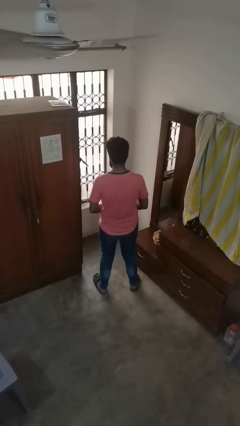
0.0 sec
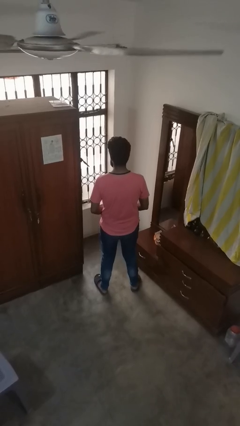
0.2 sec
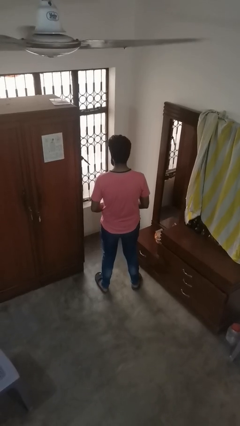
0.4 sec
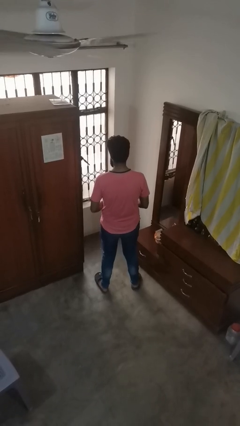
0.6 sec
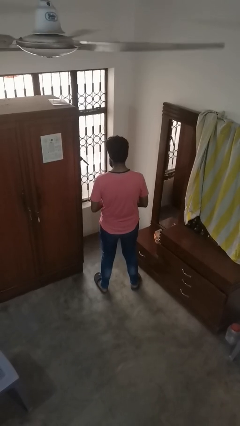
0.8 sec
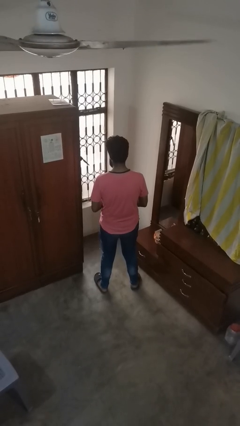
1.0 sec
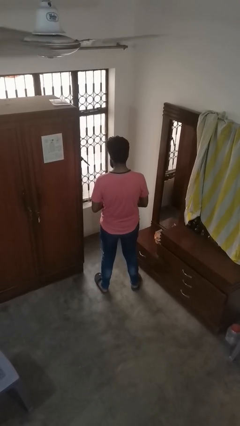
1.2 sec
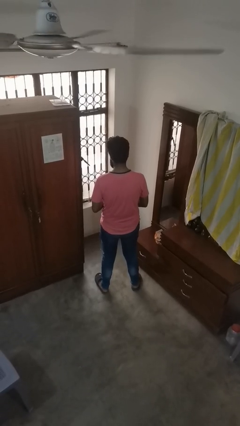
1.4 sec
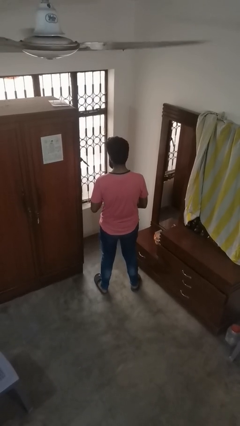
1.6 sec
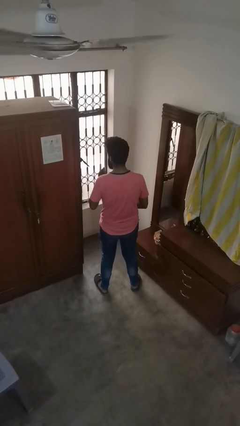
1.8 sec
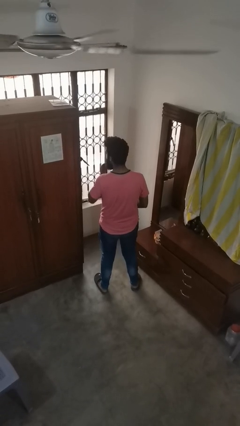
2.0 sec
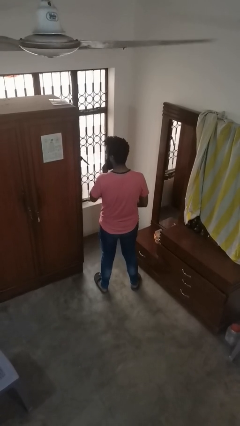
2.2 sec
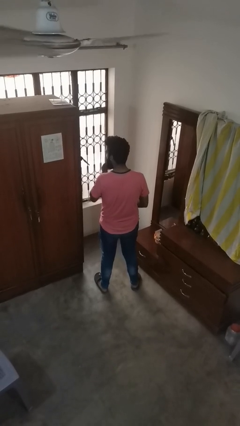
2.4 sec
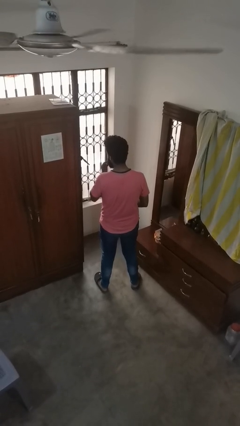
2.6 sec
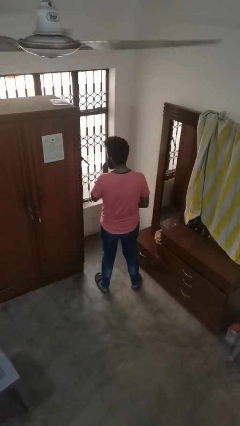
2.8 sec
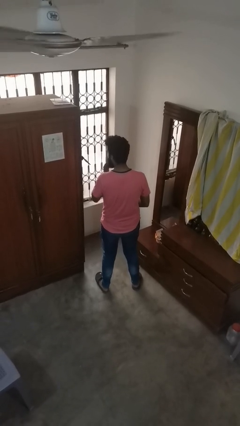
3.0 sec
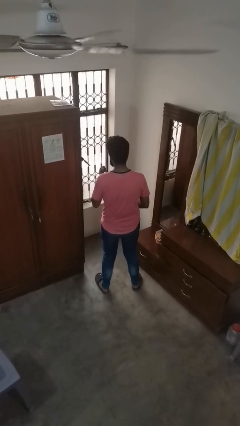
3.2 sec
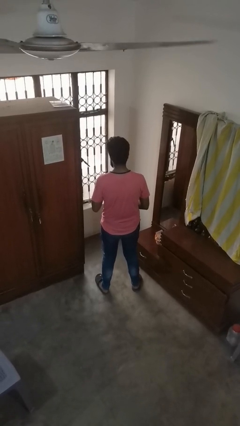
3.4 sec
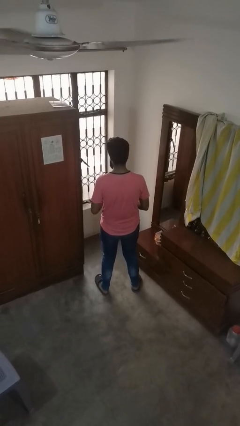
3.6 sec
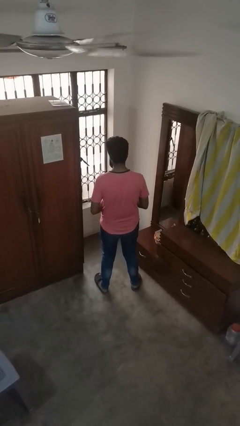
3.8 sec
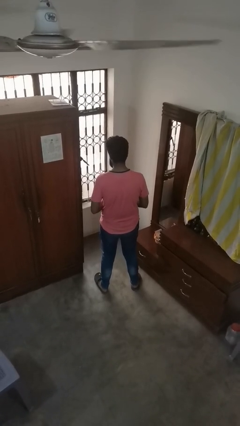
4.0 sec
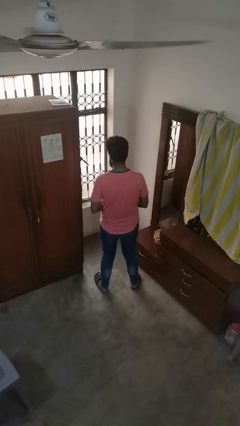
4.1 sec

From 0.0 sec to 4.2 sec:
person applies lip makeup

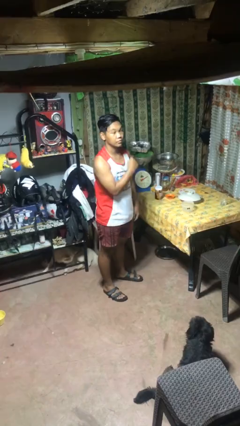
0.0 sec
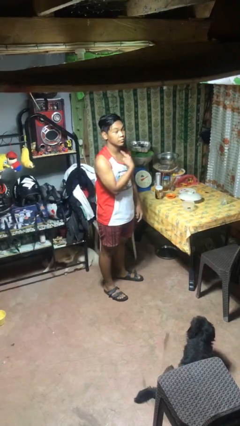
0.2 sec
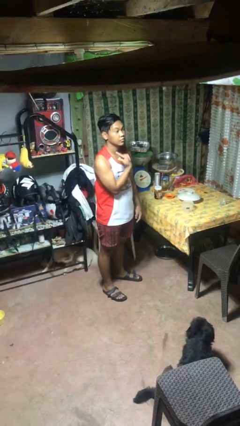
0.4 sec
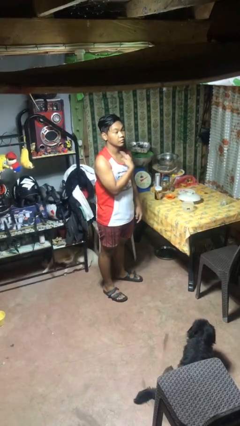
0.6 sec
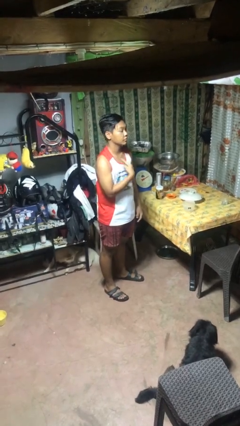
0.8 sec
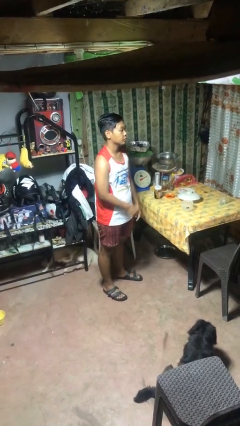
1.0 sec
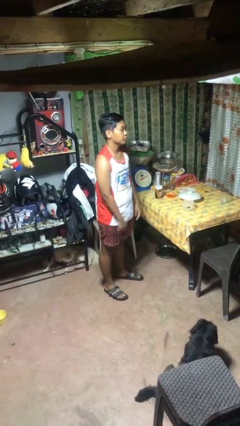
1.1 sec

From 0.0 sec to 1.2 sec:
person gestures cut

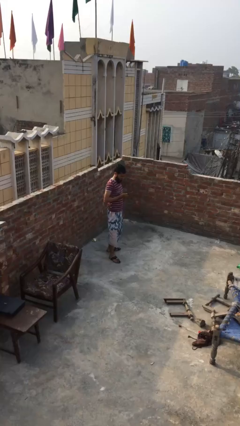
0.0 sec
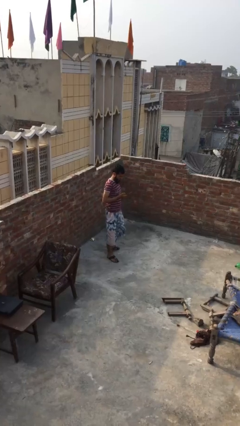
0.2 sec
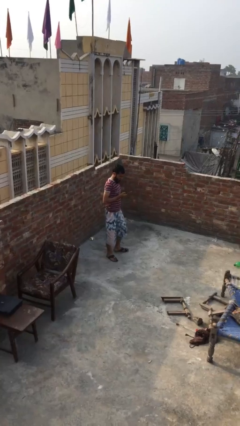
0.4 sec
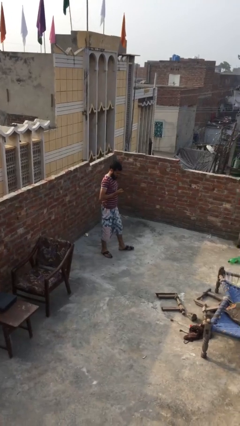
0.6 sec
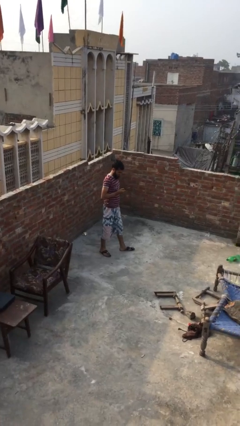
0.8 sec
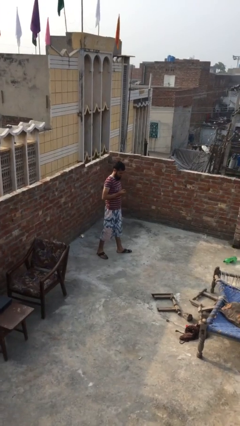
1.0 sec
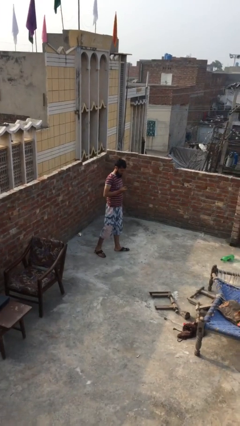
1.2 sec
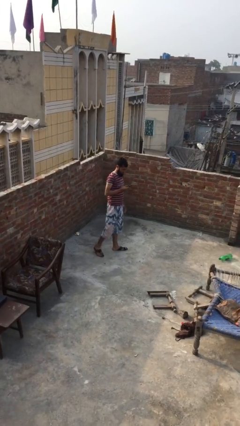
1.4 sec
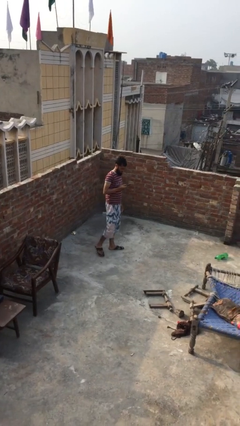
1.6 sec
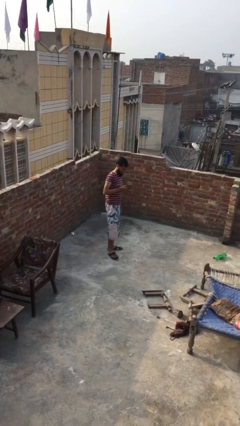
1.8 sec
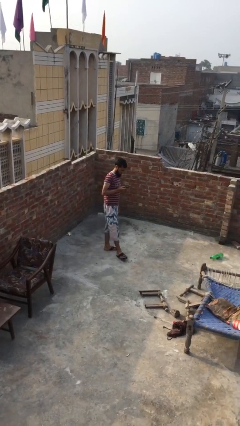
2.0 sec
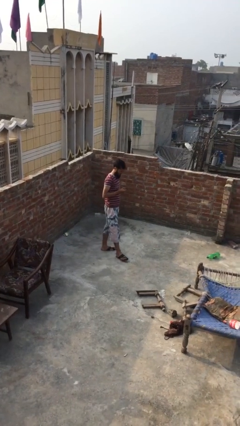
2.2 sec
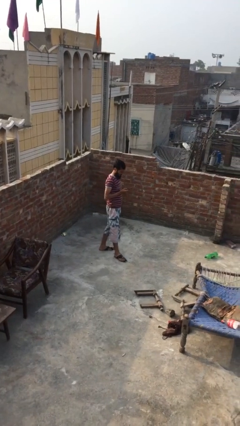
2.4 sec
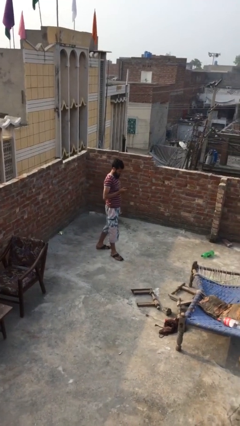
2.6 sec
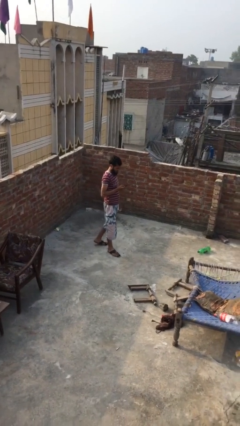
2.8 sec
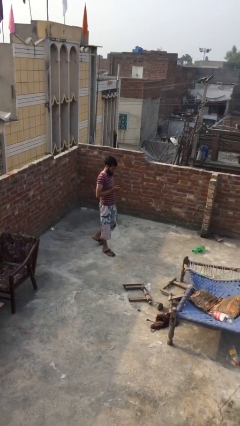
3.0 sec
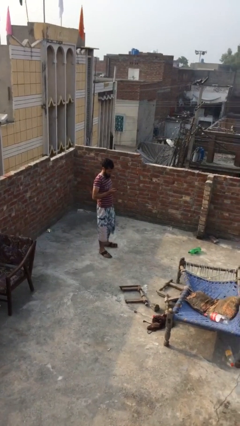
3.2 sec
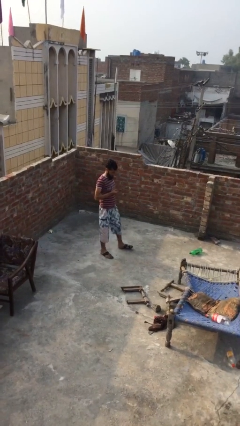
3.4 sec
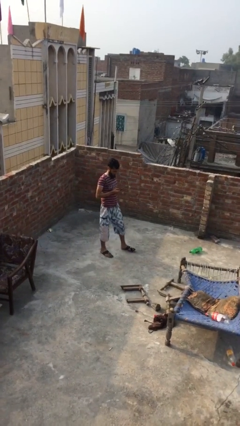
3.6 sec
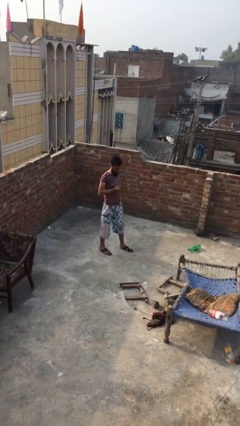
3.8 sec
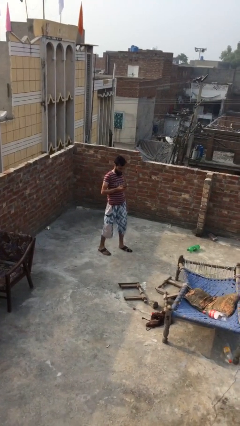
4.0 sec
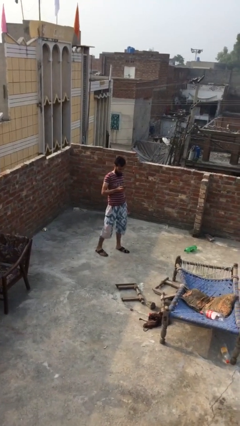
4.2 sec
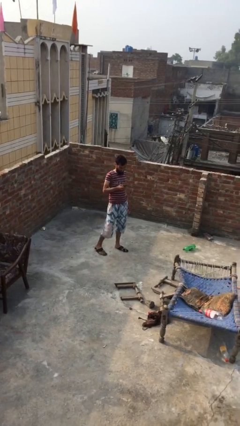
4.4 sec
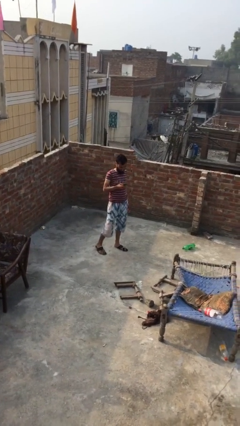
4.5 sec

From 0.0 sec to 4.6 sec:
person texts on phone

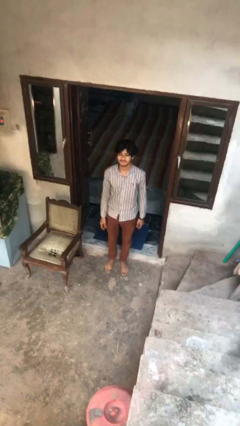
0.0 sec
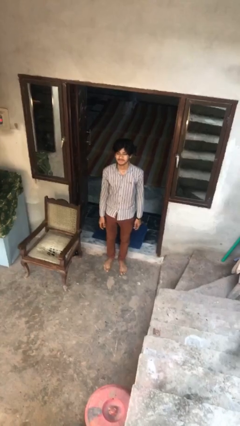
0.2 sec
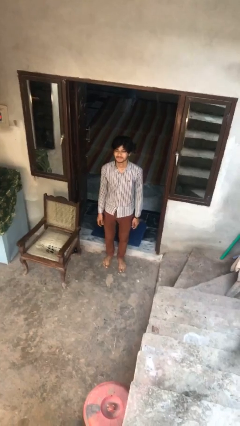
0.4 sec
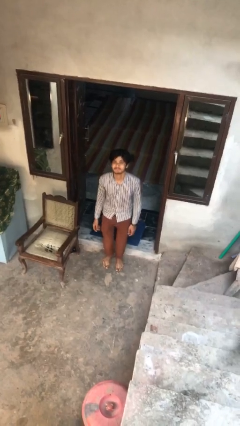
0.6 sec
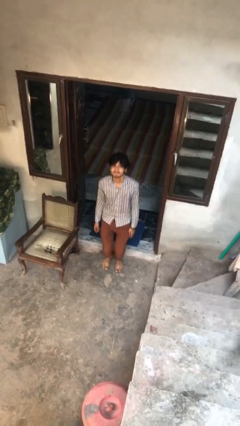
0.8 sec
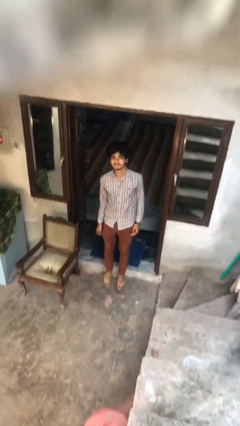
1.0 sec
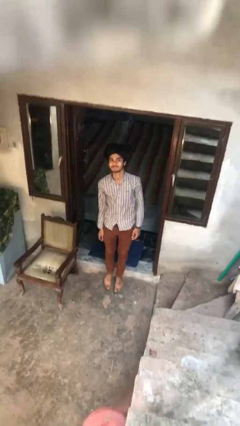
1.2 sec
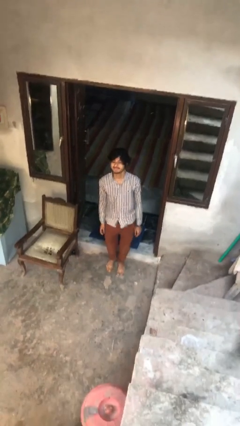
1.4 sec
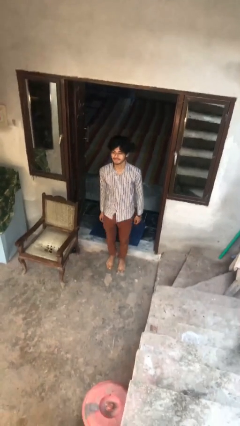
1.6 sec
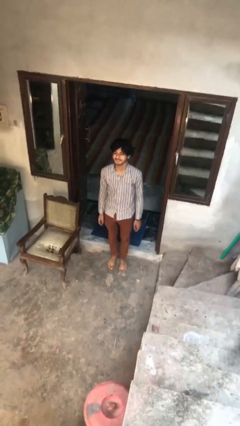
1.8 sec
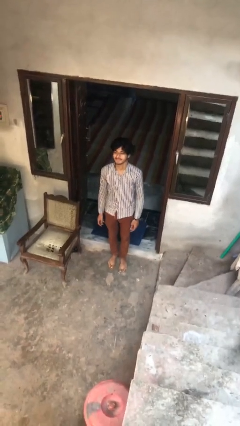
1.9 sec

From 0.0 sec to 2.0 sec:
person jumps

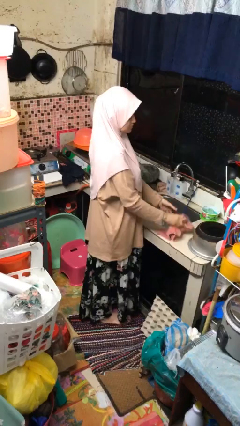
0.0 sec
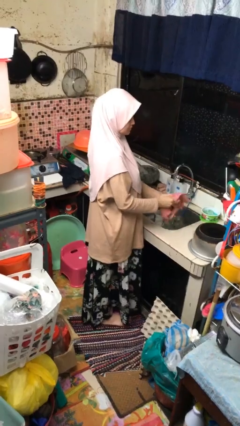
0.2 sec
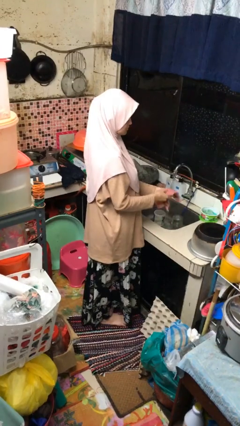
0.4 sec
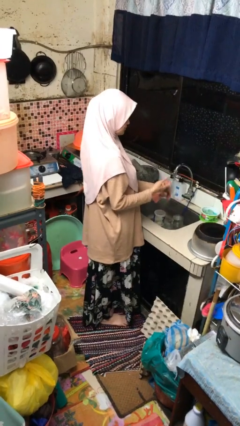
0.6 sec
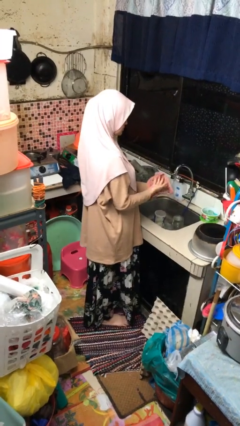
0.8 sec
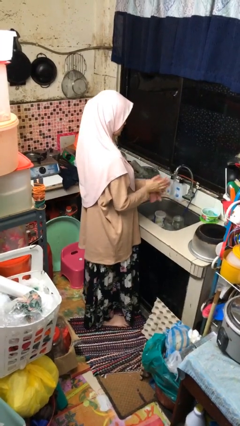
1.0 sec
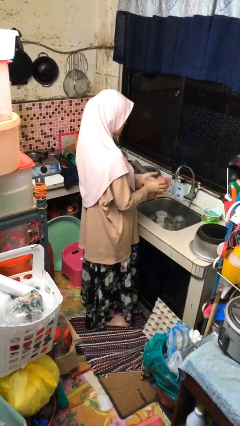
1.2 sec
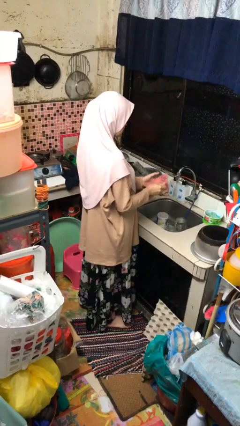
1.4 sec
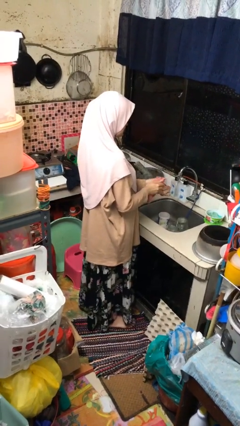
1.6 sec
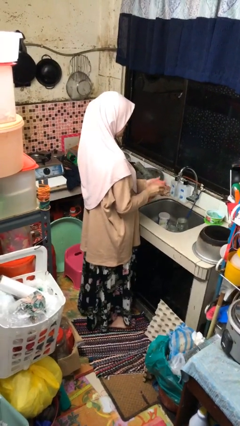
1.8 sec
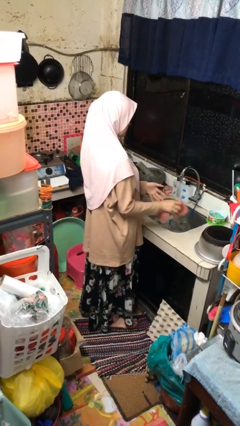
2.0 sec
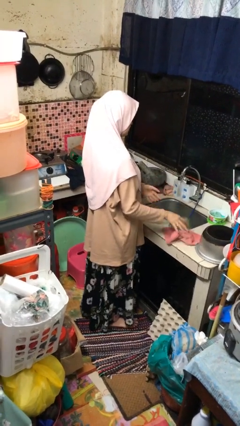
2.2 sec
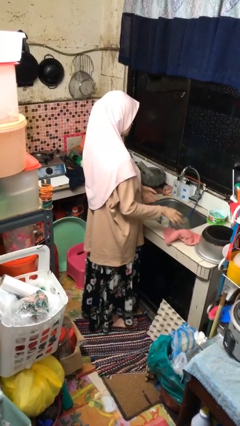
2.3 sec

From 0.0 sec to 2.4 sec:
person dries hands with towel

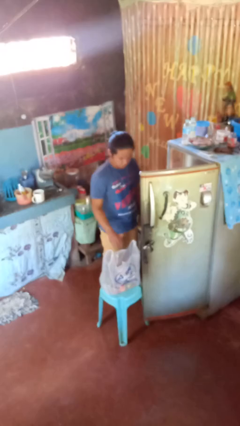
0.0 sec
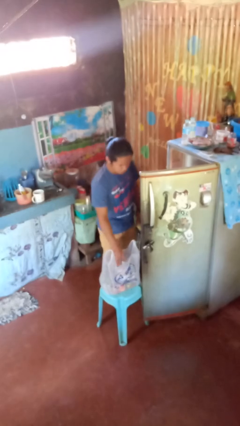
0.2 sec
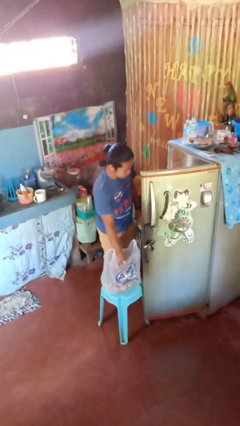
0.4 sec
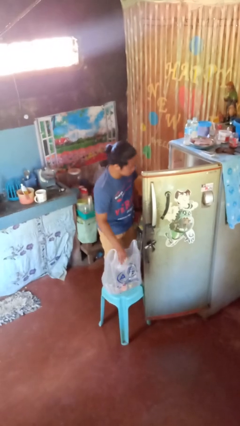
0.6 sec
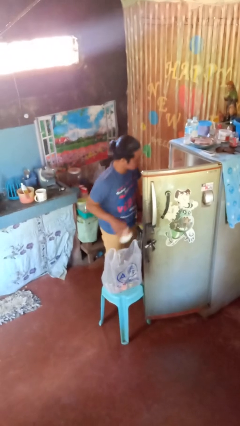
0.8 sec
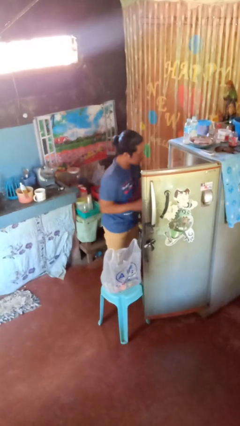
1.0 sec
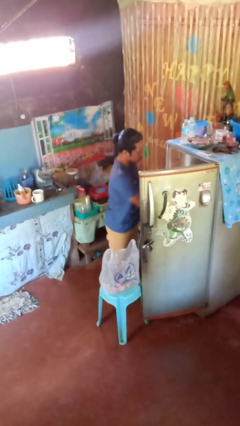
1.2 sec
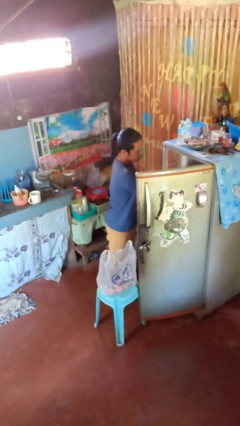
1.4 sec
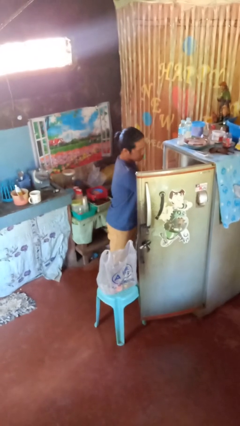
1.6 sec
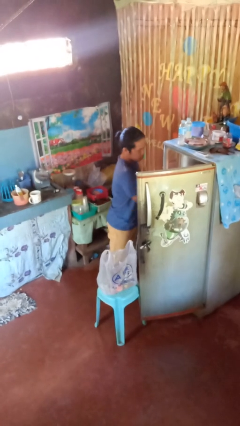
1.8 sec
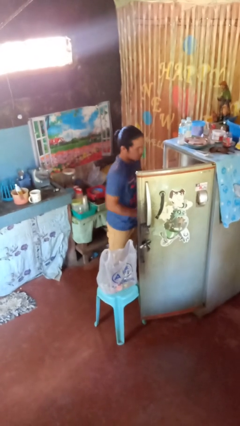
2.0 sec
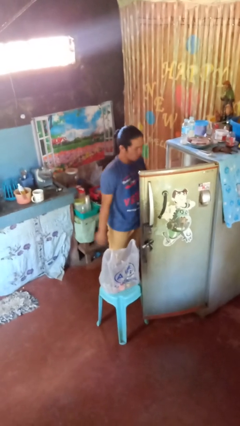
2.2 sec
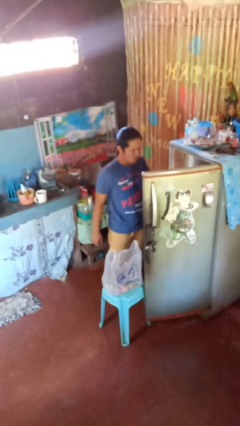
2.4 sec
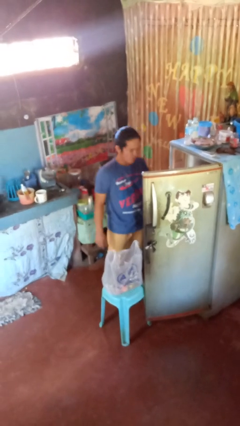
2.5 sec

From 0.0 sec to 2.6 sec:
person loads groceries into refrigerator

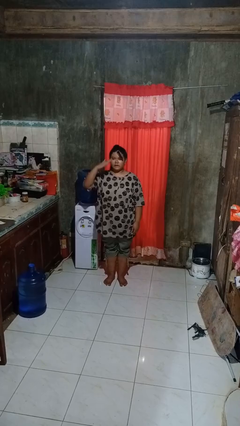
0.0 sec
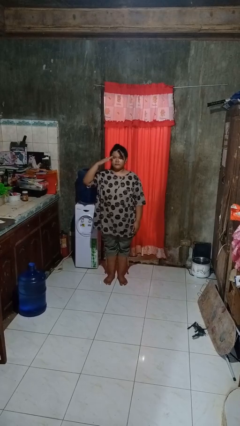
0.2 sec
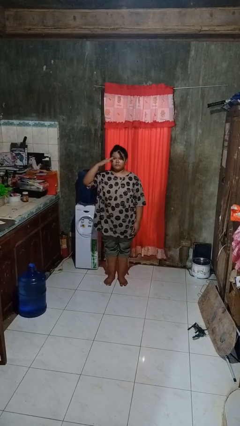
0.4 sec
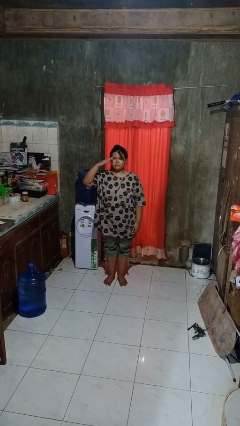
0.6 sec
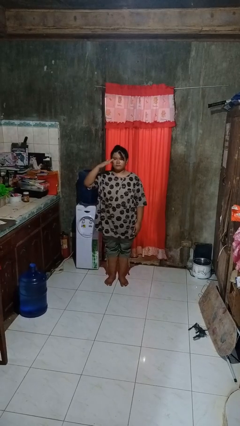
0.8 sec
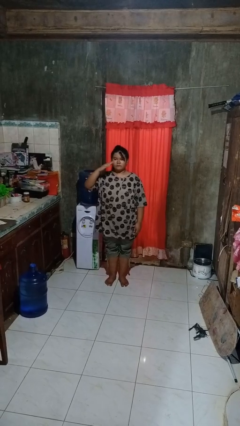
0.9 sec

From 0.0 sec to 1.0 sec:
person salutes
